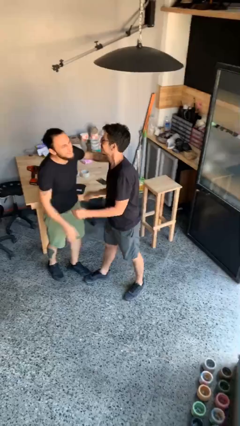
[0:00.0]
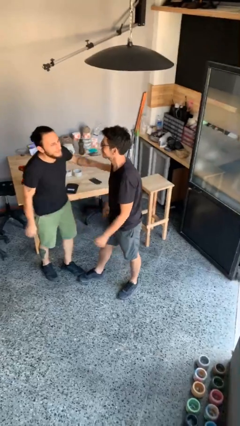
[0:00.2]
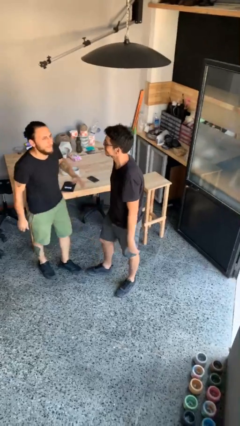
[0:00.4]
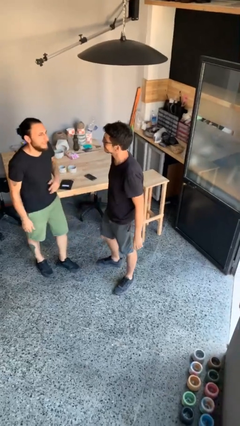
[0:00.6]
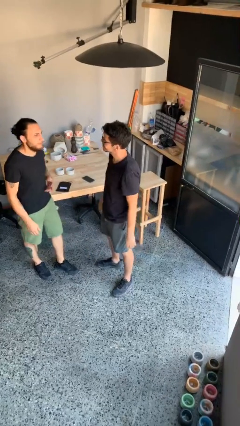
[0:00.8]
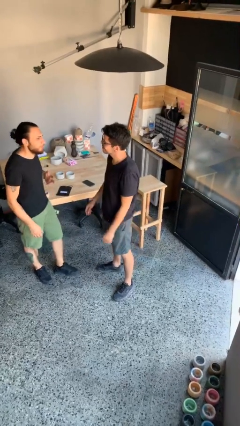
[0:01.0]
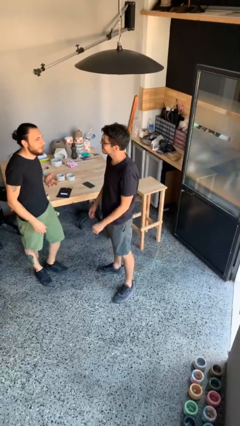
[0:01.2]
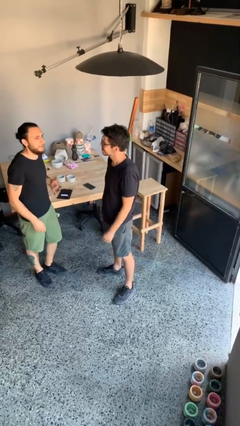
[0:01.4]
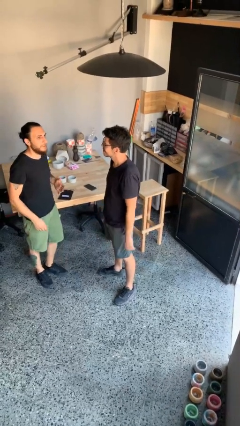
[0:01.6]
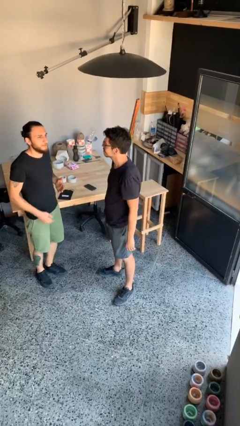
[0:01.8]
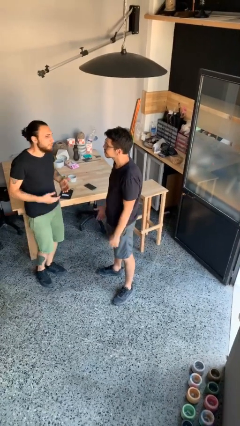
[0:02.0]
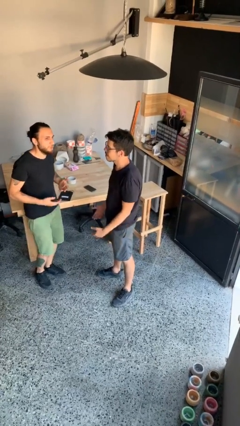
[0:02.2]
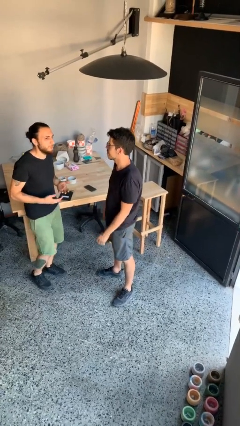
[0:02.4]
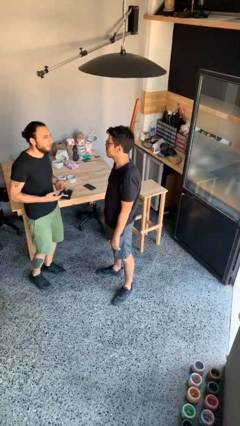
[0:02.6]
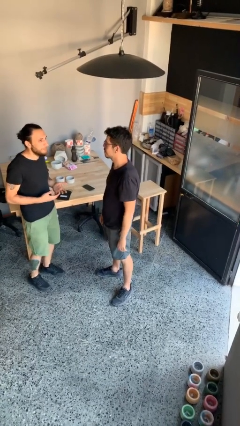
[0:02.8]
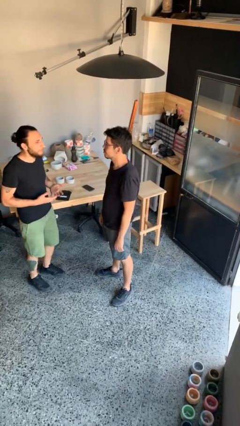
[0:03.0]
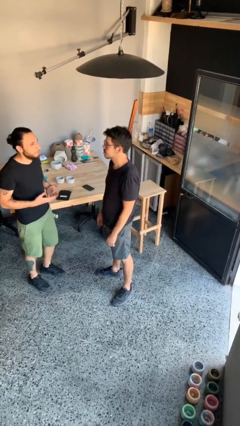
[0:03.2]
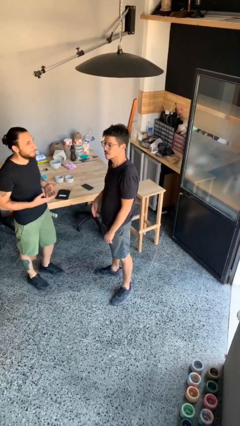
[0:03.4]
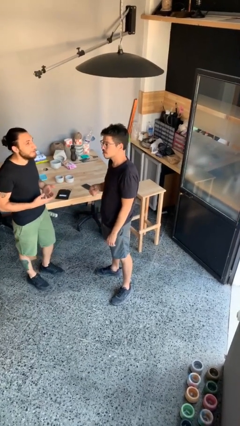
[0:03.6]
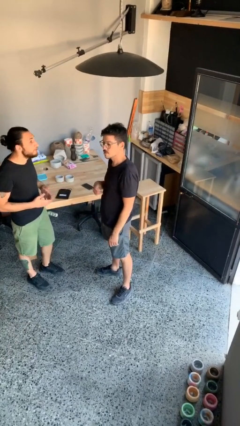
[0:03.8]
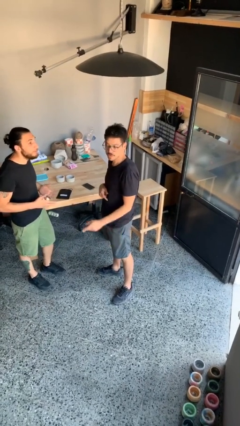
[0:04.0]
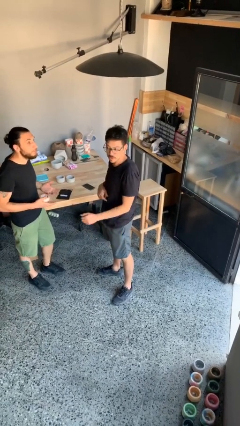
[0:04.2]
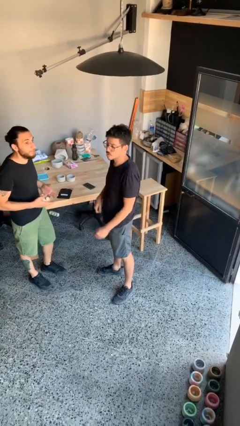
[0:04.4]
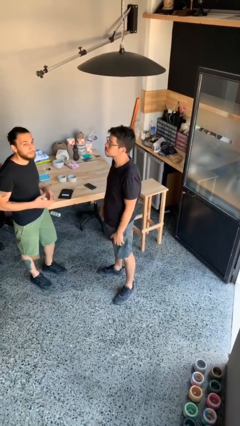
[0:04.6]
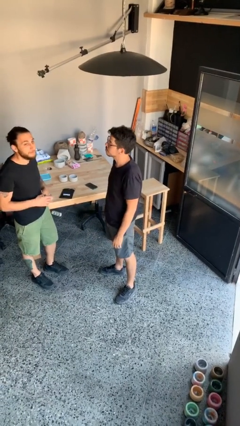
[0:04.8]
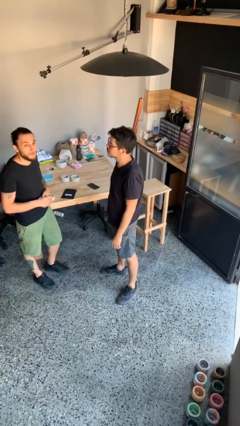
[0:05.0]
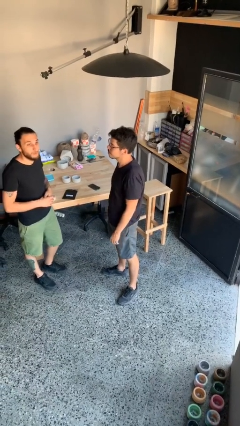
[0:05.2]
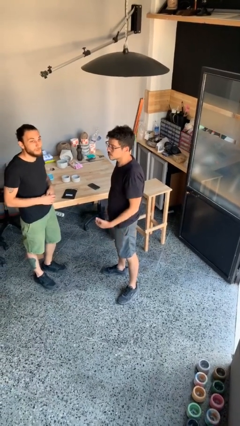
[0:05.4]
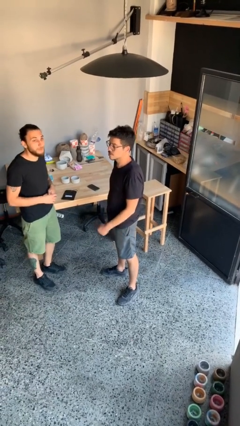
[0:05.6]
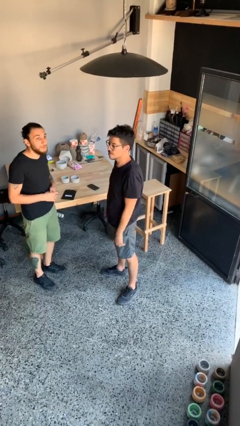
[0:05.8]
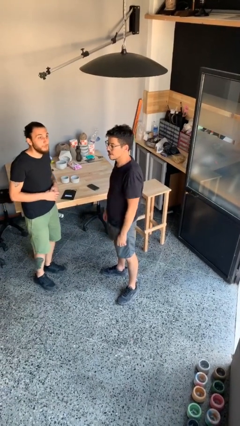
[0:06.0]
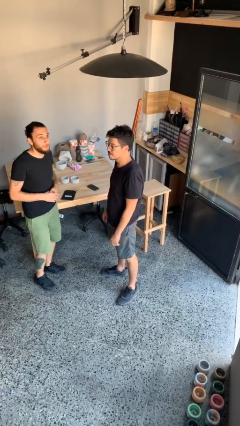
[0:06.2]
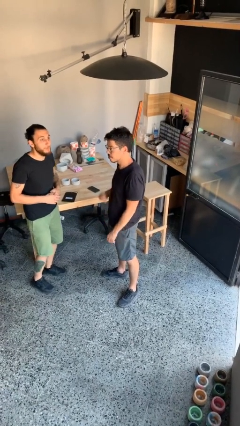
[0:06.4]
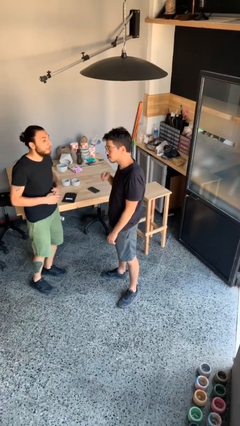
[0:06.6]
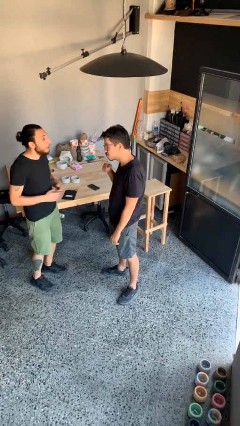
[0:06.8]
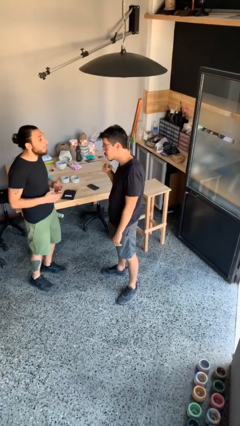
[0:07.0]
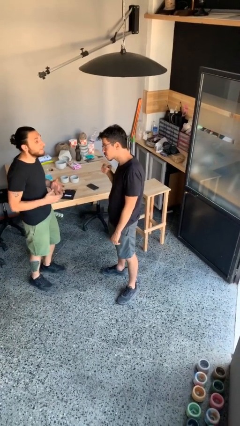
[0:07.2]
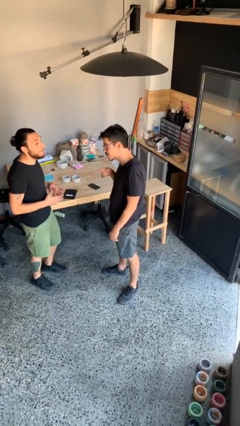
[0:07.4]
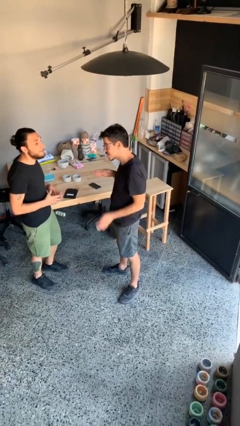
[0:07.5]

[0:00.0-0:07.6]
person talks to person

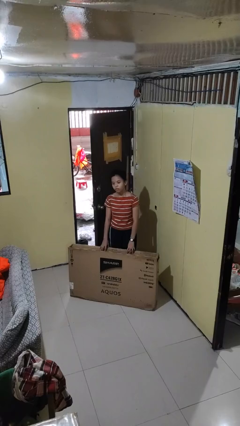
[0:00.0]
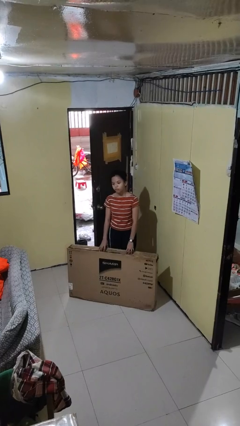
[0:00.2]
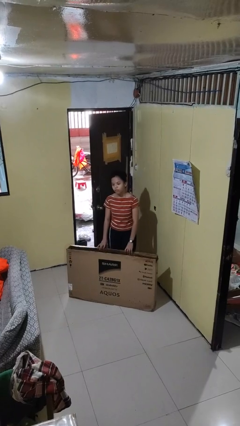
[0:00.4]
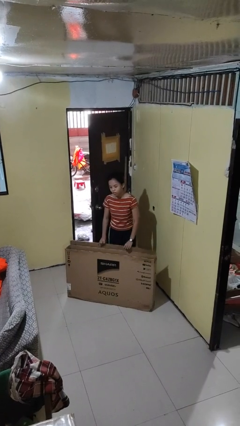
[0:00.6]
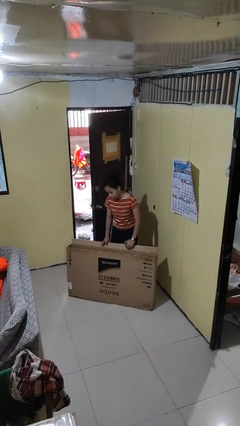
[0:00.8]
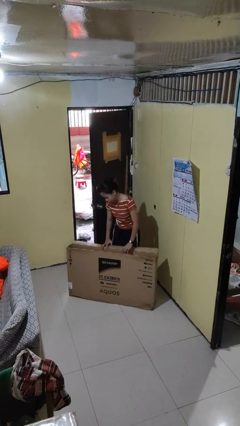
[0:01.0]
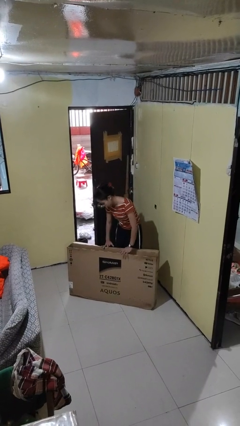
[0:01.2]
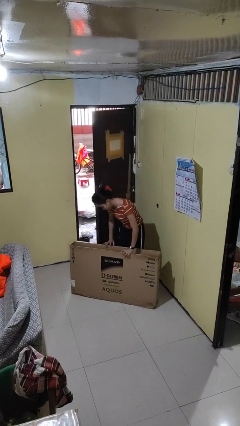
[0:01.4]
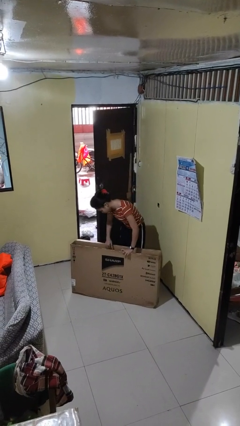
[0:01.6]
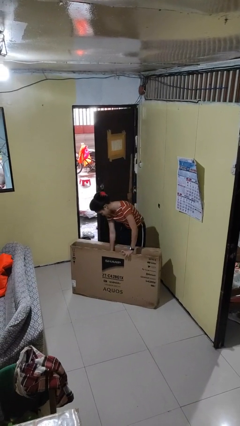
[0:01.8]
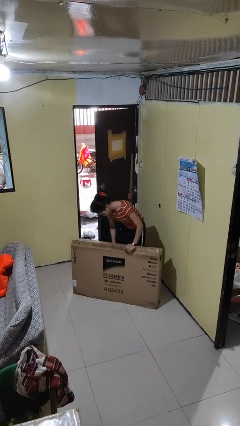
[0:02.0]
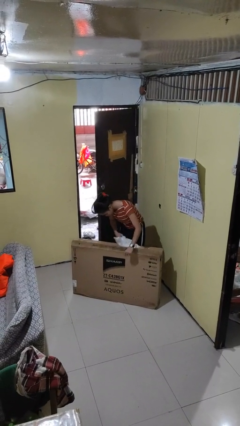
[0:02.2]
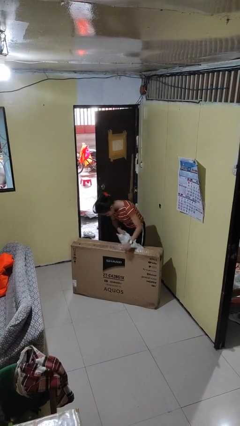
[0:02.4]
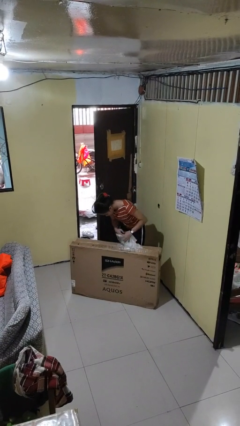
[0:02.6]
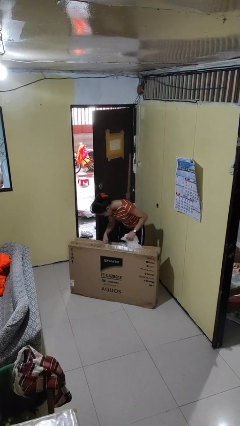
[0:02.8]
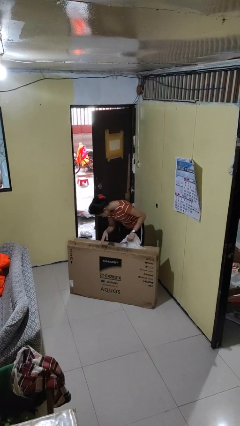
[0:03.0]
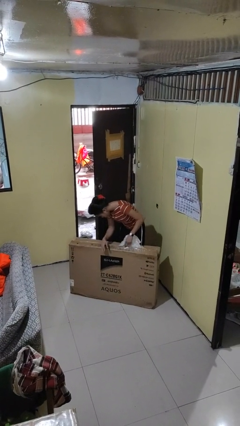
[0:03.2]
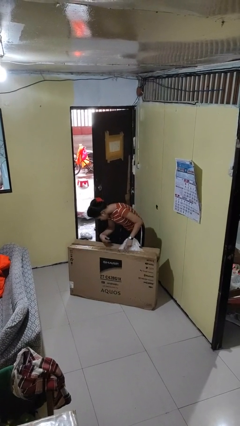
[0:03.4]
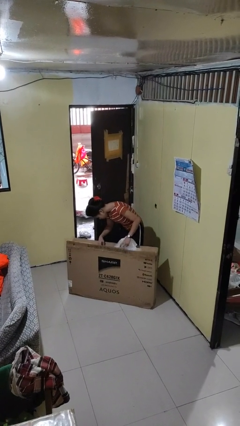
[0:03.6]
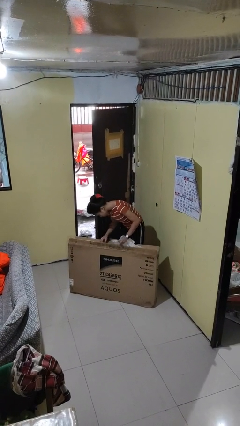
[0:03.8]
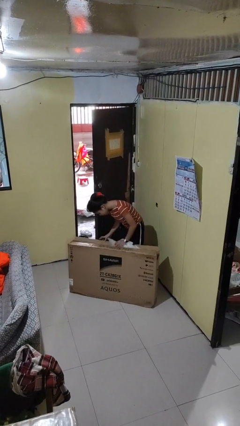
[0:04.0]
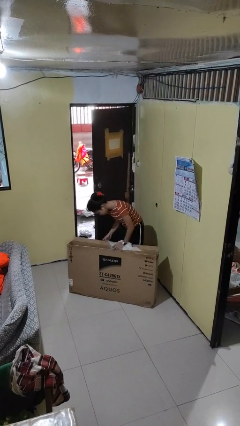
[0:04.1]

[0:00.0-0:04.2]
person searches in box

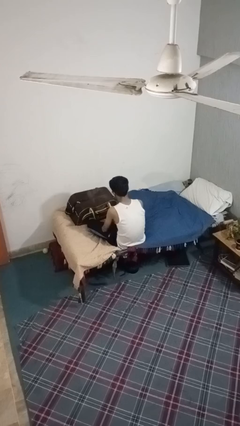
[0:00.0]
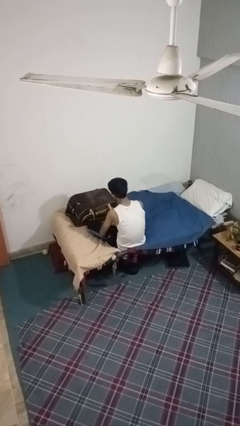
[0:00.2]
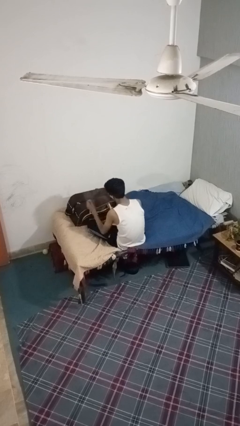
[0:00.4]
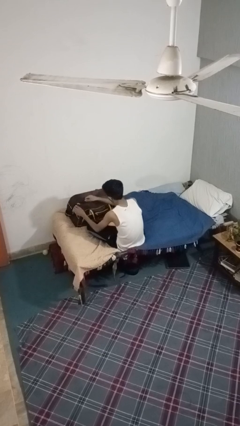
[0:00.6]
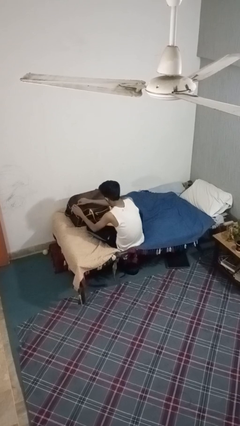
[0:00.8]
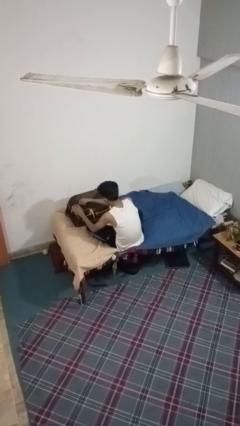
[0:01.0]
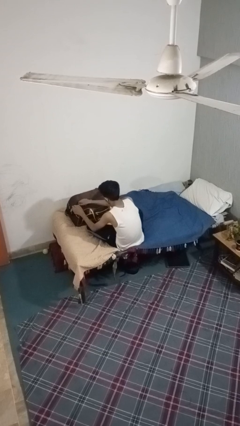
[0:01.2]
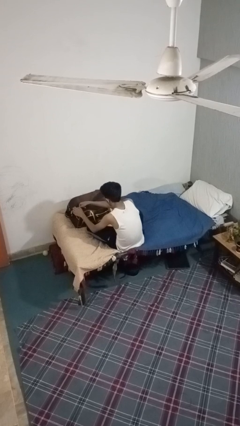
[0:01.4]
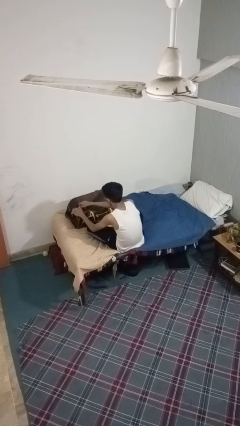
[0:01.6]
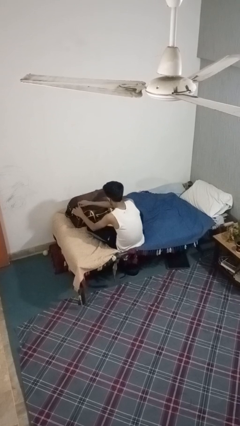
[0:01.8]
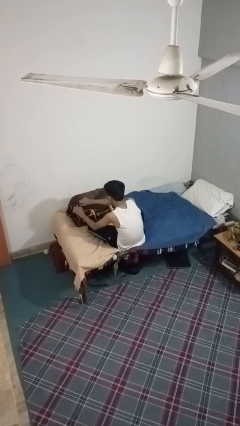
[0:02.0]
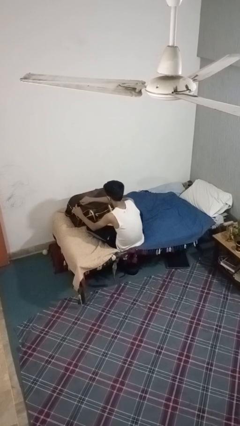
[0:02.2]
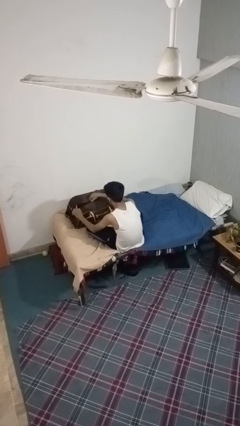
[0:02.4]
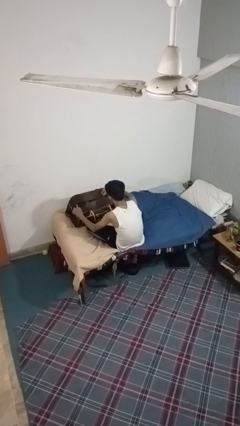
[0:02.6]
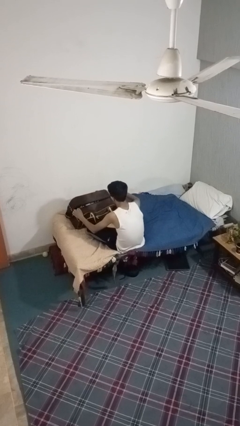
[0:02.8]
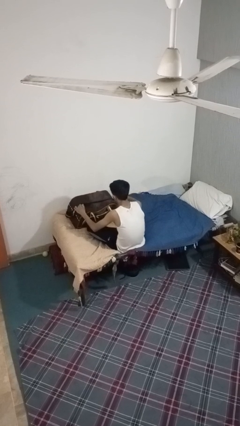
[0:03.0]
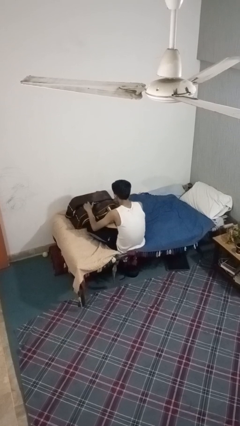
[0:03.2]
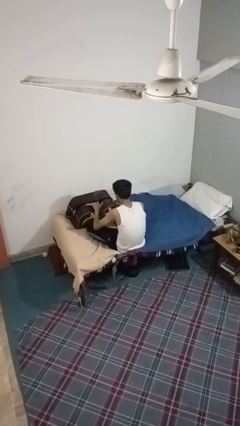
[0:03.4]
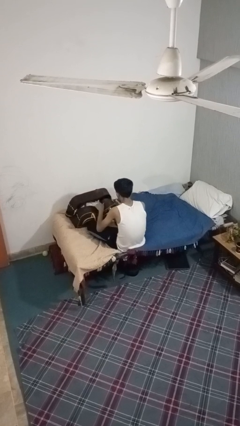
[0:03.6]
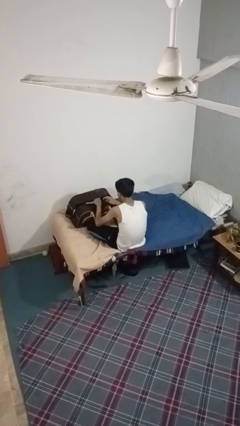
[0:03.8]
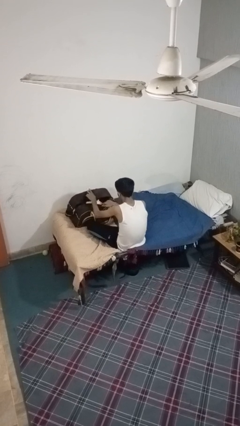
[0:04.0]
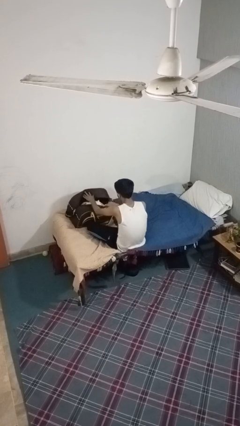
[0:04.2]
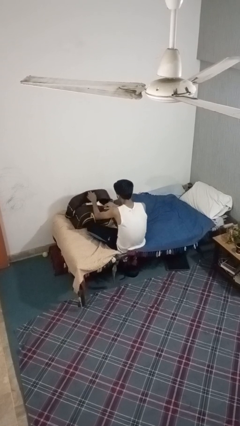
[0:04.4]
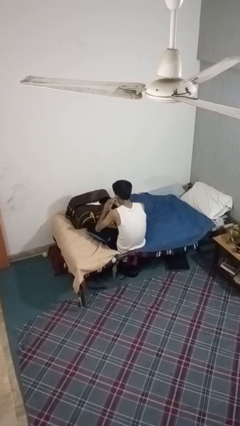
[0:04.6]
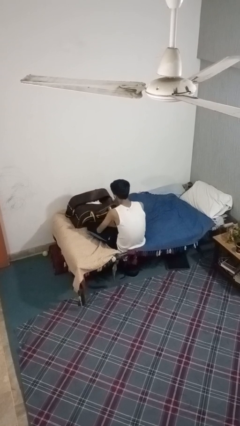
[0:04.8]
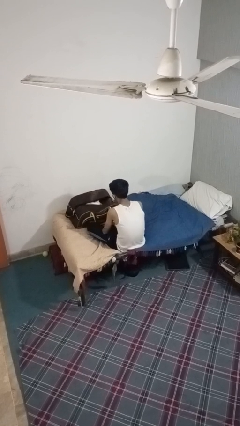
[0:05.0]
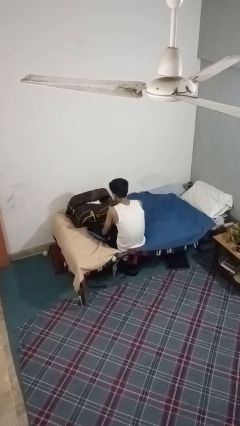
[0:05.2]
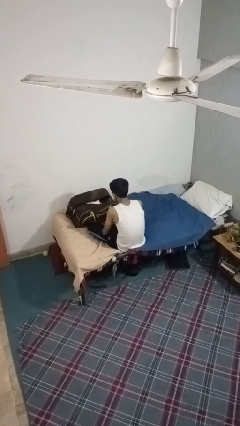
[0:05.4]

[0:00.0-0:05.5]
person opens suitcase

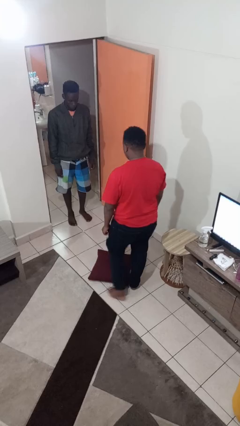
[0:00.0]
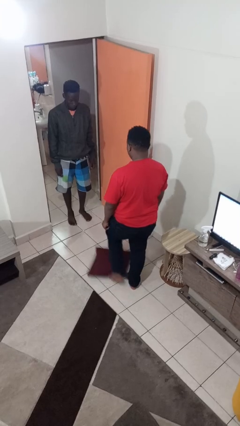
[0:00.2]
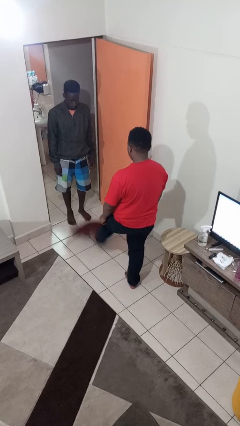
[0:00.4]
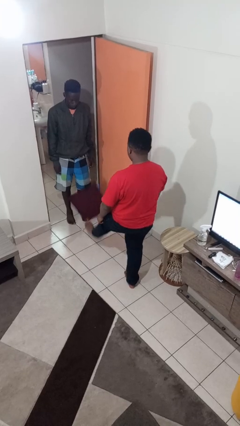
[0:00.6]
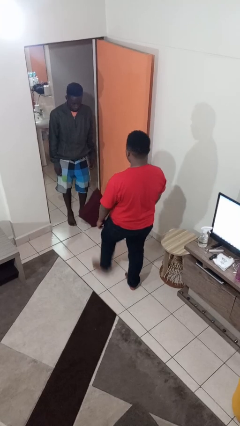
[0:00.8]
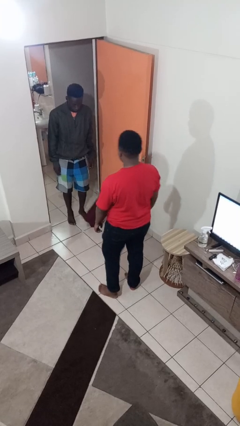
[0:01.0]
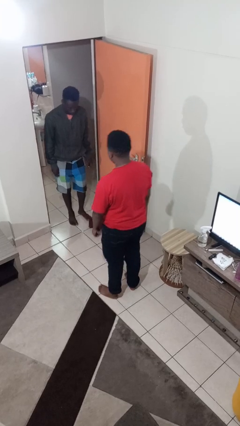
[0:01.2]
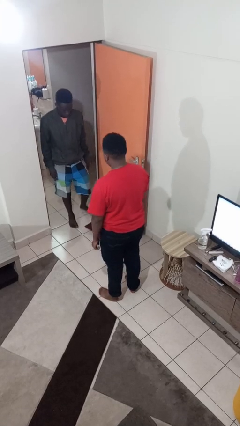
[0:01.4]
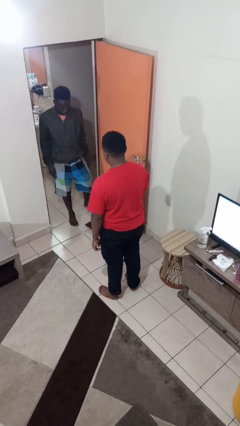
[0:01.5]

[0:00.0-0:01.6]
person kicks object to person
